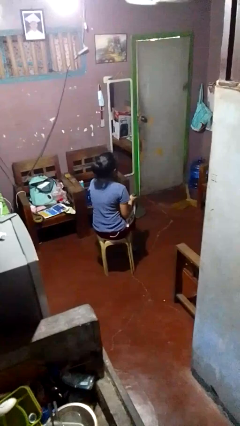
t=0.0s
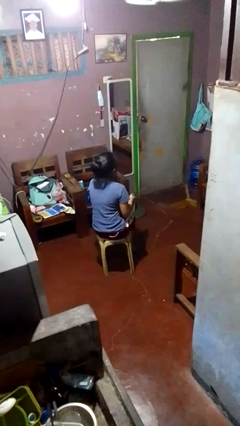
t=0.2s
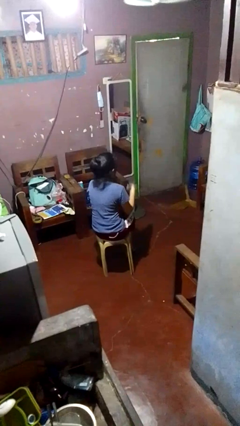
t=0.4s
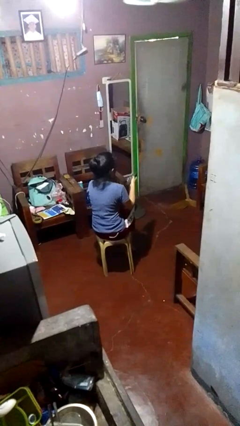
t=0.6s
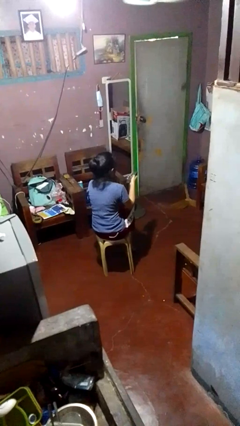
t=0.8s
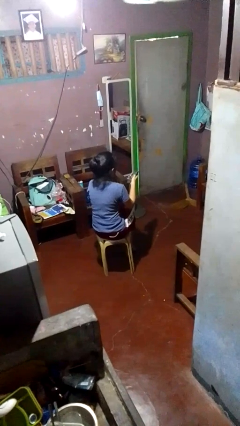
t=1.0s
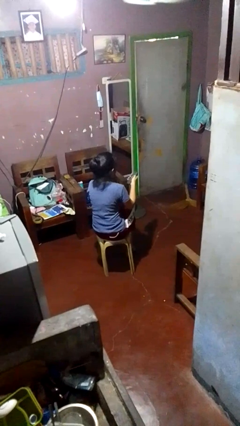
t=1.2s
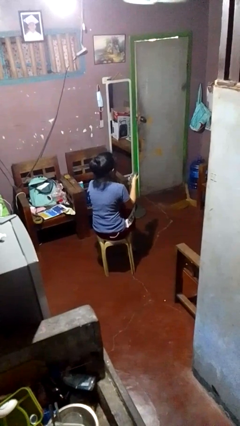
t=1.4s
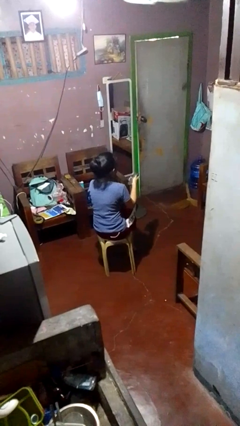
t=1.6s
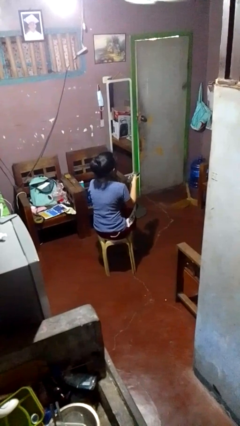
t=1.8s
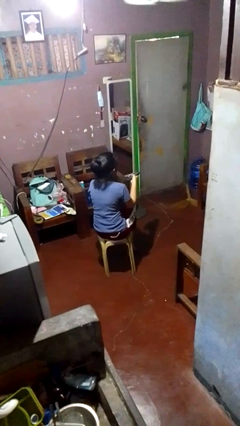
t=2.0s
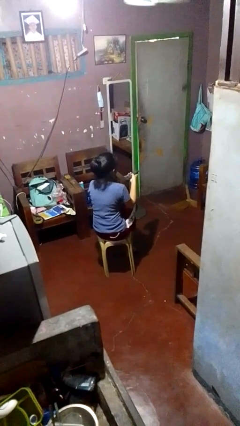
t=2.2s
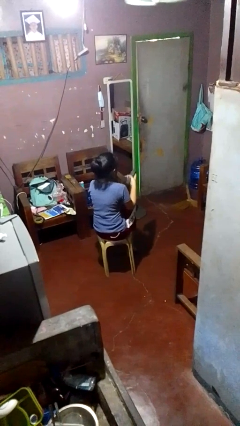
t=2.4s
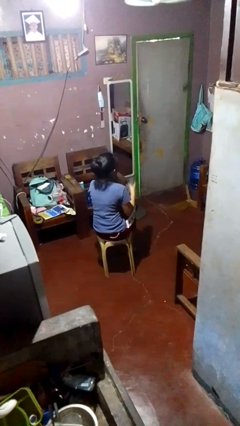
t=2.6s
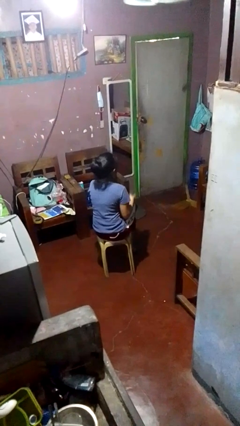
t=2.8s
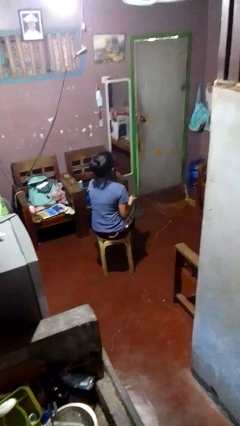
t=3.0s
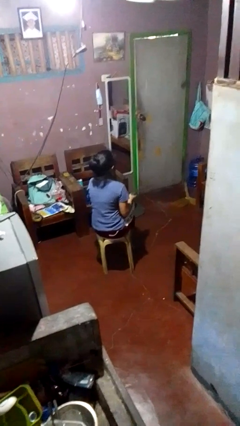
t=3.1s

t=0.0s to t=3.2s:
person uses television remote

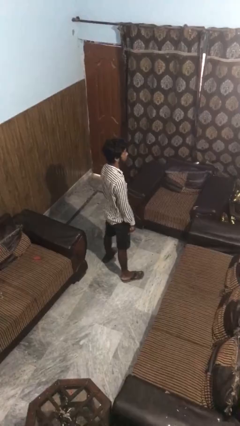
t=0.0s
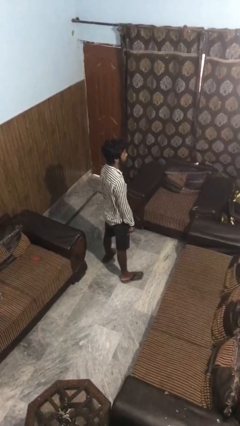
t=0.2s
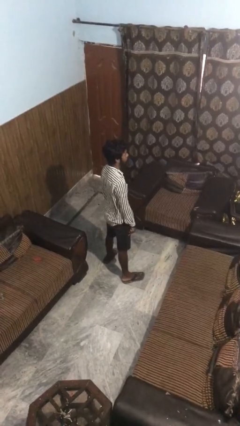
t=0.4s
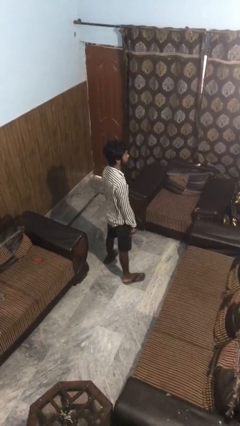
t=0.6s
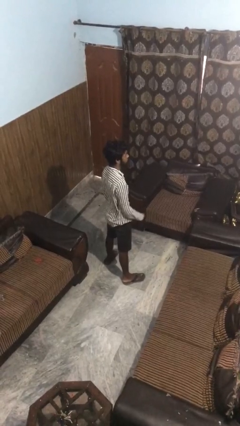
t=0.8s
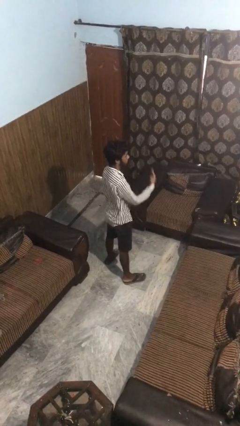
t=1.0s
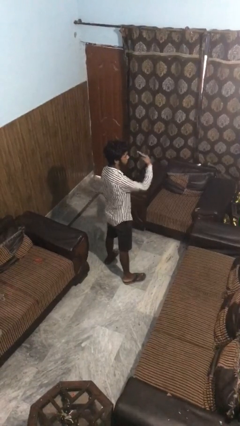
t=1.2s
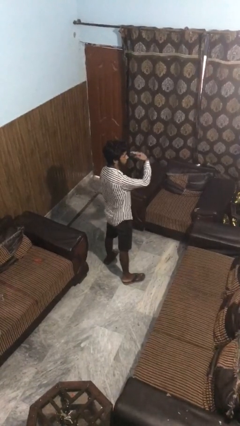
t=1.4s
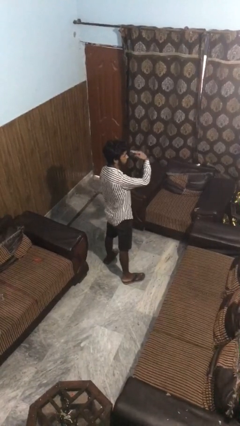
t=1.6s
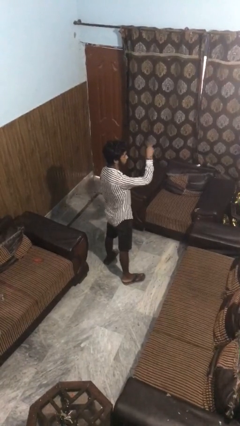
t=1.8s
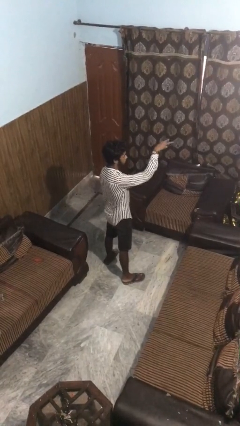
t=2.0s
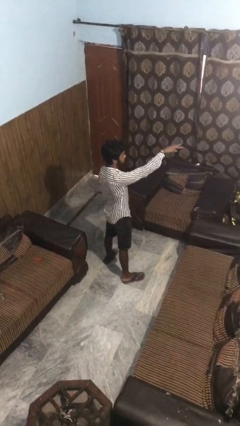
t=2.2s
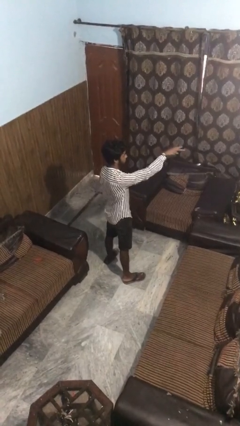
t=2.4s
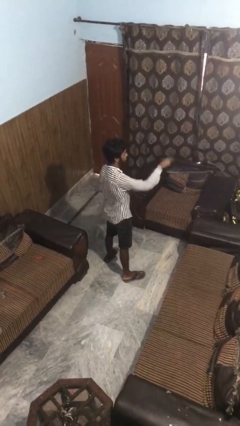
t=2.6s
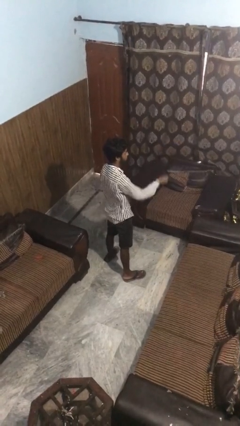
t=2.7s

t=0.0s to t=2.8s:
person gestures watch closely

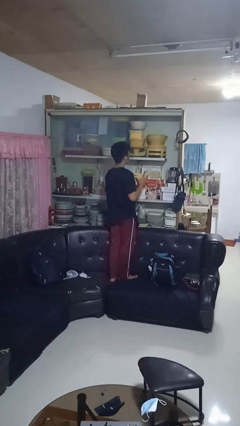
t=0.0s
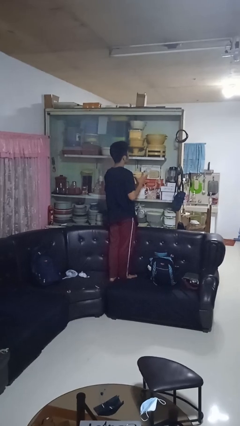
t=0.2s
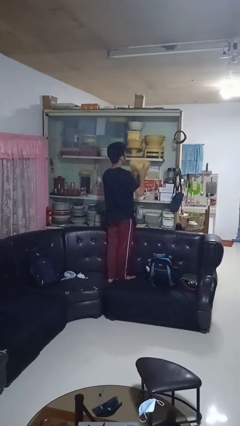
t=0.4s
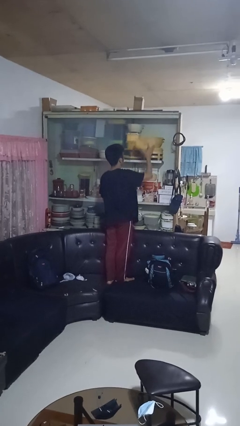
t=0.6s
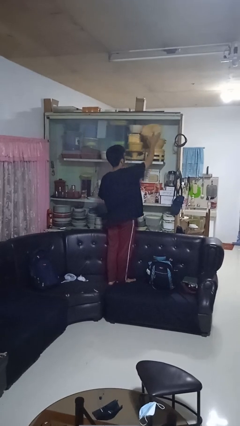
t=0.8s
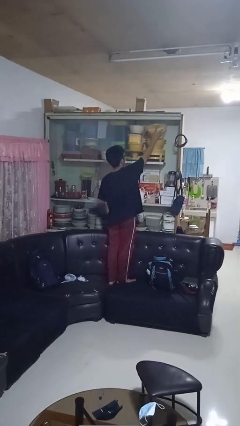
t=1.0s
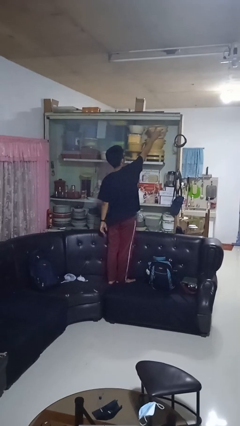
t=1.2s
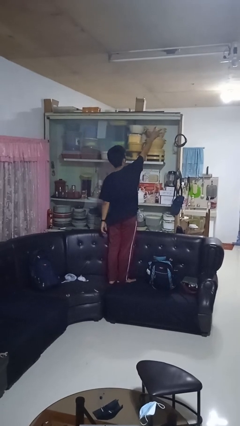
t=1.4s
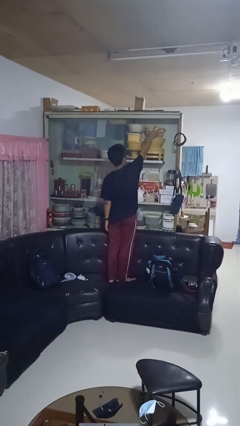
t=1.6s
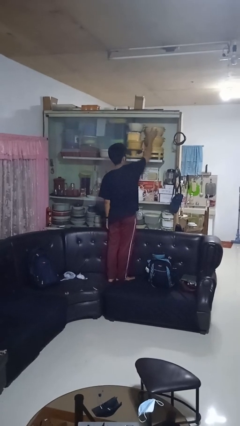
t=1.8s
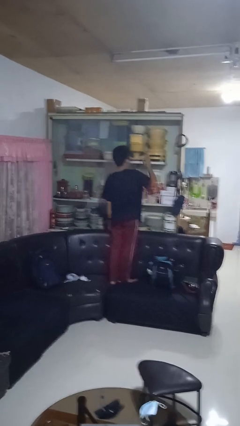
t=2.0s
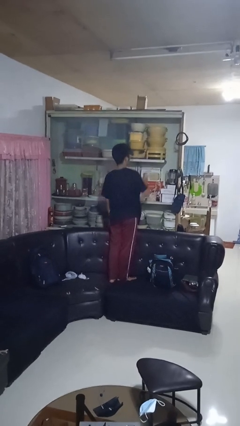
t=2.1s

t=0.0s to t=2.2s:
person puts down object into cabinet

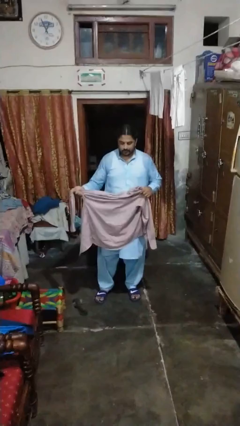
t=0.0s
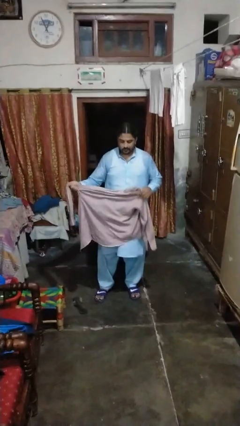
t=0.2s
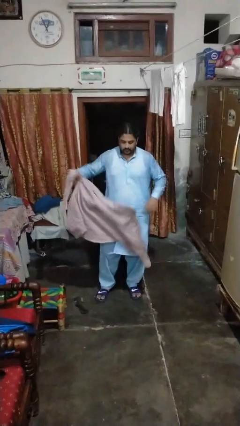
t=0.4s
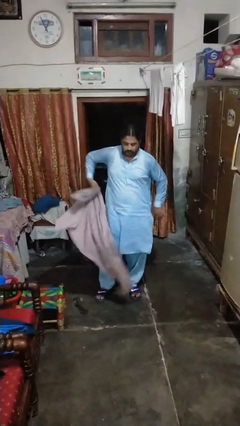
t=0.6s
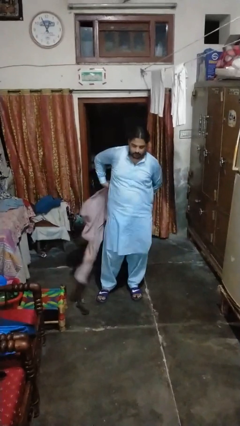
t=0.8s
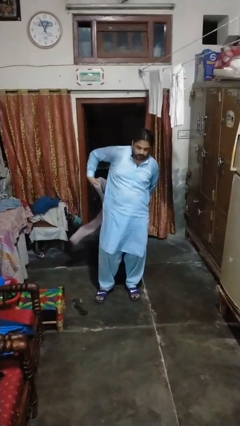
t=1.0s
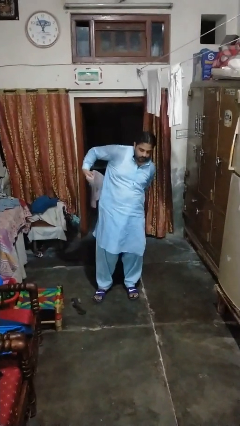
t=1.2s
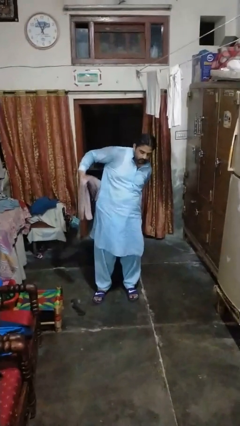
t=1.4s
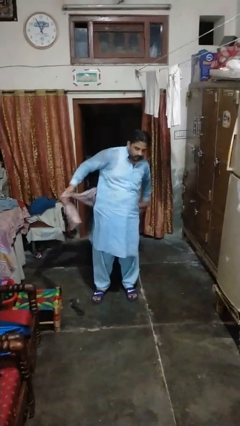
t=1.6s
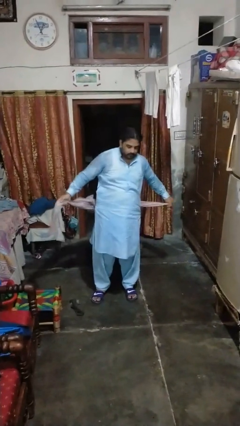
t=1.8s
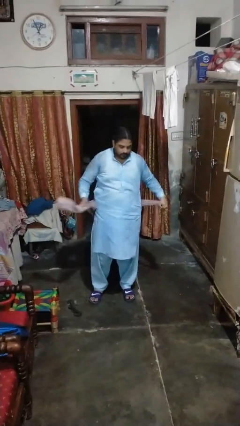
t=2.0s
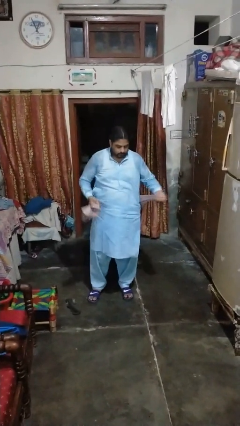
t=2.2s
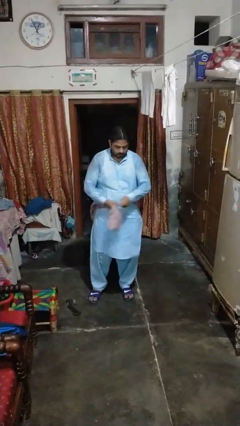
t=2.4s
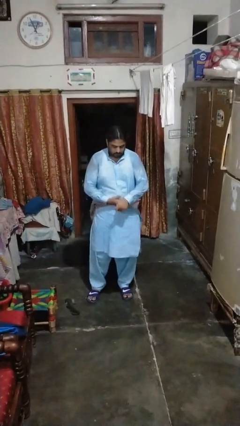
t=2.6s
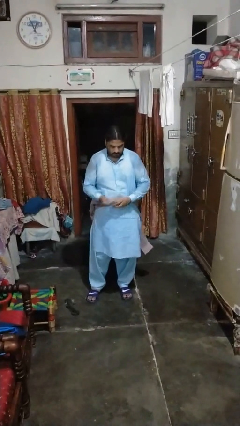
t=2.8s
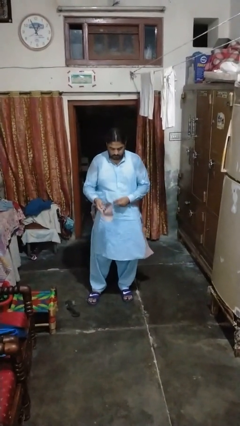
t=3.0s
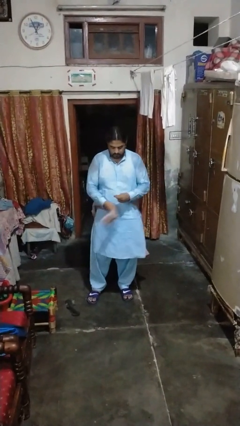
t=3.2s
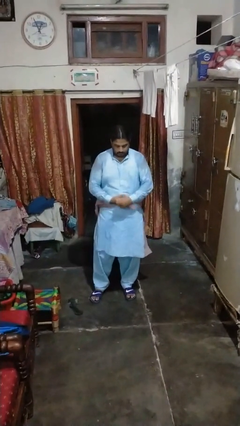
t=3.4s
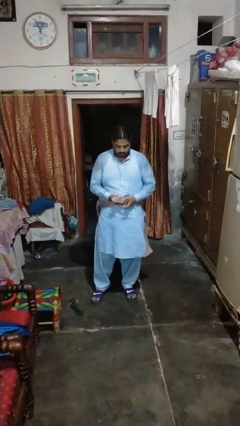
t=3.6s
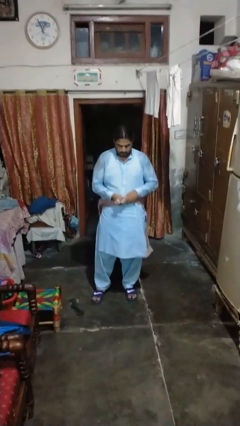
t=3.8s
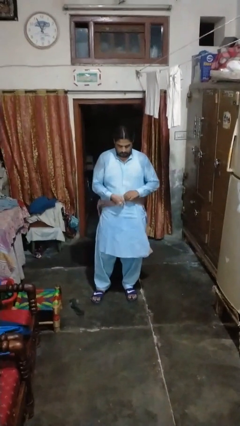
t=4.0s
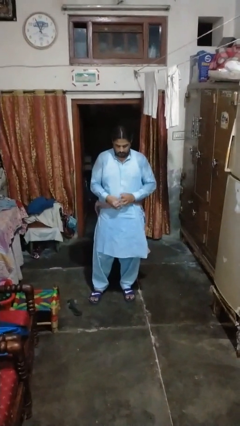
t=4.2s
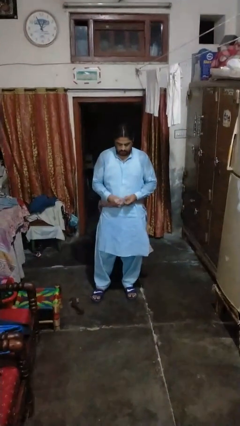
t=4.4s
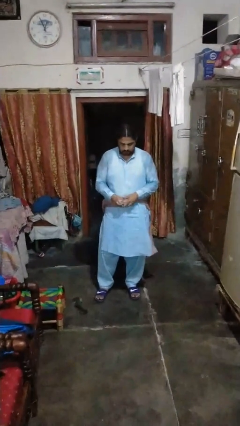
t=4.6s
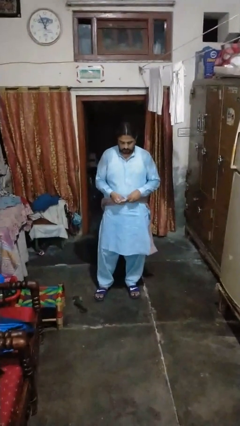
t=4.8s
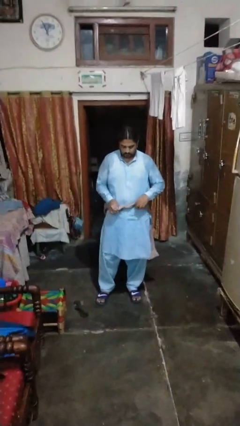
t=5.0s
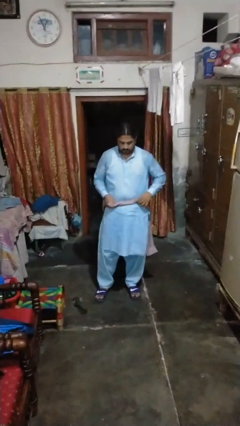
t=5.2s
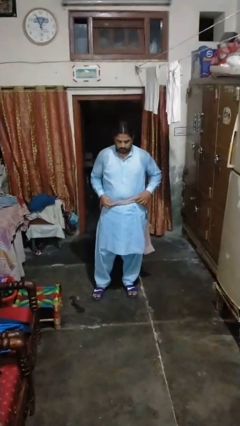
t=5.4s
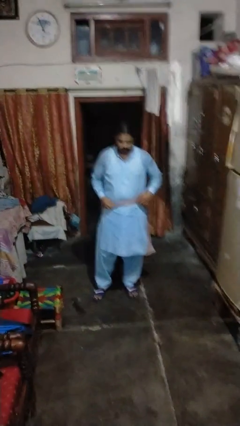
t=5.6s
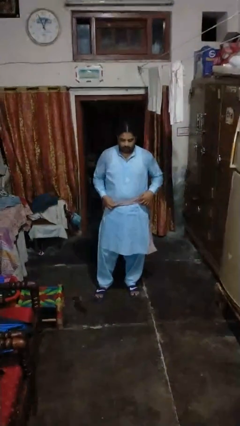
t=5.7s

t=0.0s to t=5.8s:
person ties jacket around waist

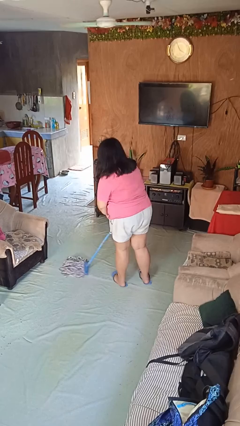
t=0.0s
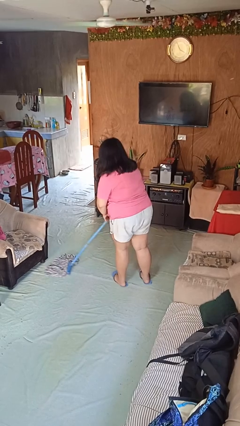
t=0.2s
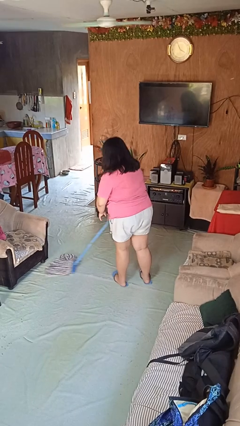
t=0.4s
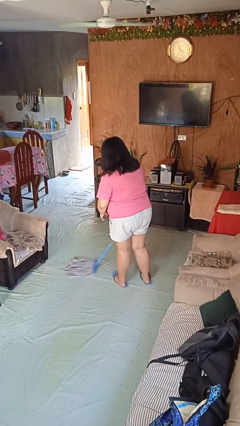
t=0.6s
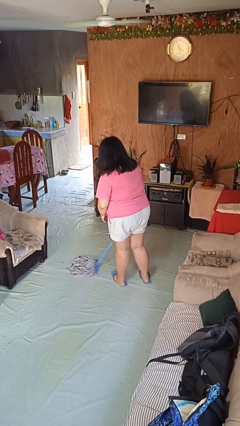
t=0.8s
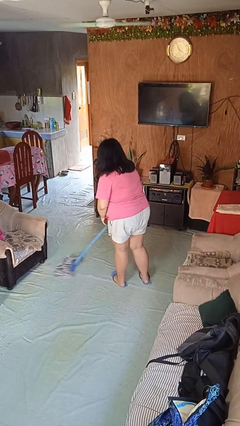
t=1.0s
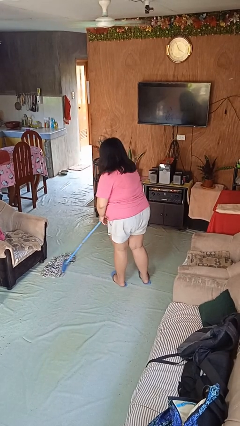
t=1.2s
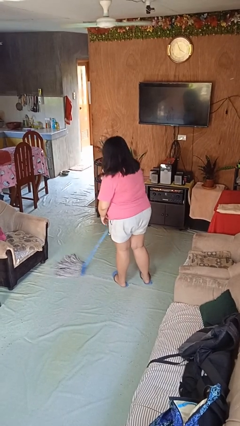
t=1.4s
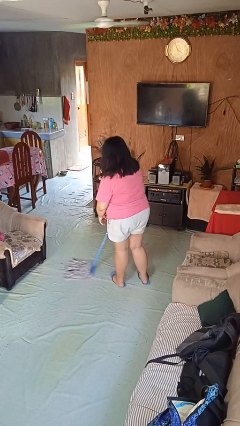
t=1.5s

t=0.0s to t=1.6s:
person mops

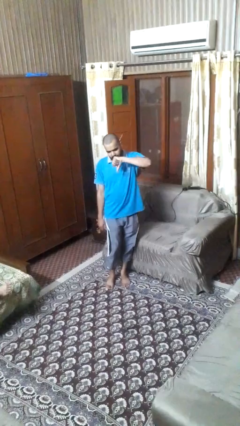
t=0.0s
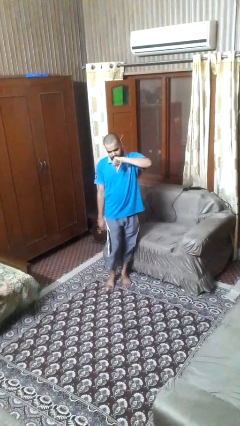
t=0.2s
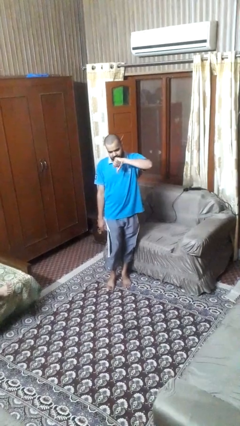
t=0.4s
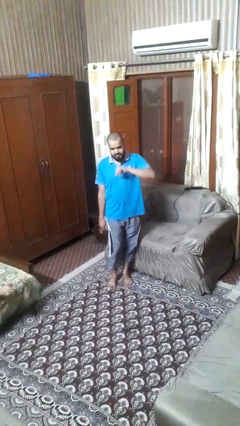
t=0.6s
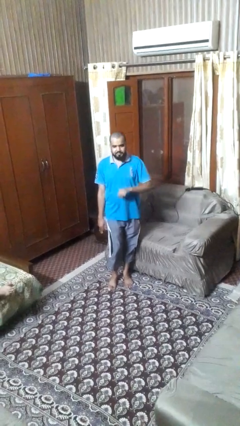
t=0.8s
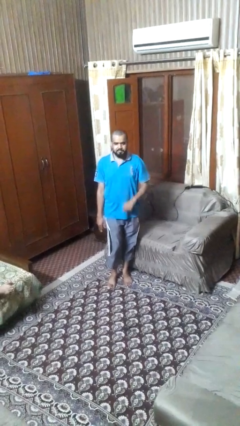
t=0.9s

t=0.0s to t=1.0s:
person gestures thumbs down

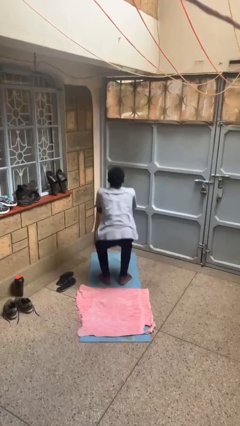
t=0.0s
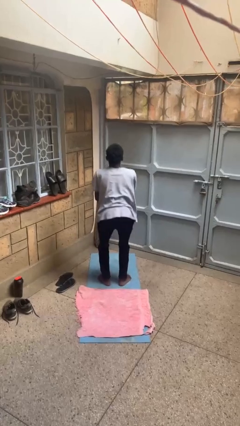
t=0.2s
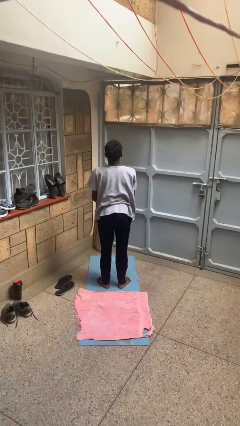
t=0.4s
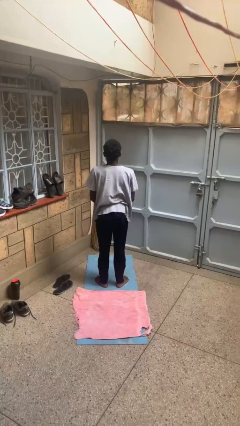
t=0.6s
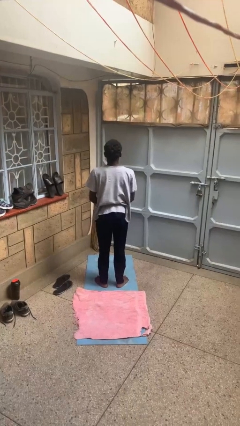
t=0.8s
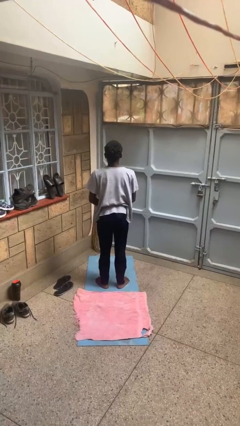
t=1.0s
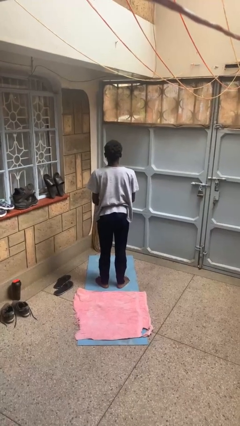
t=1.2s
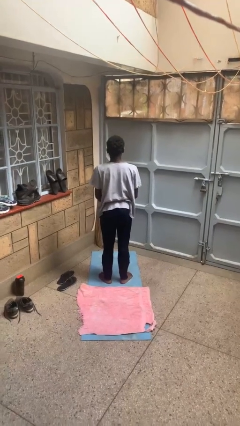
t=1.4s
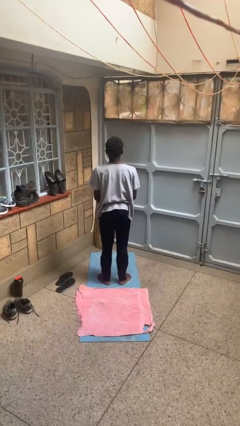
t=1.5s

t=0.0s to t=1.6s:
person stands up
